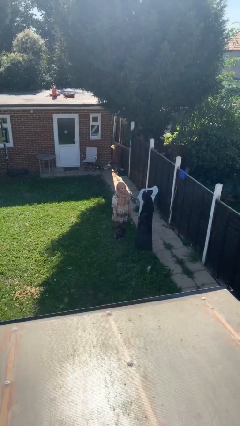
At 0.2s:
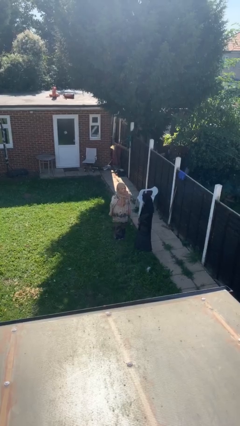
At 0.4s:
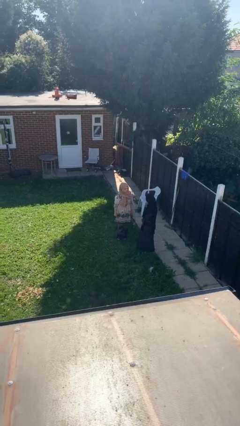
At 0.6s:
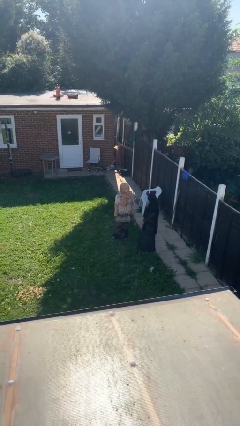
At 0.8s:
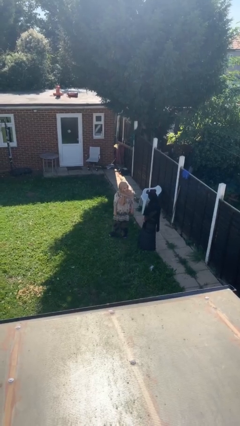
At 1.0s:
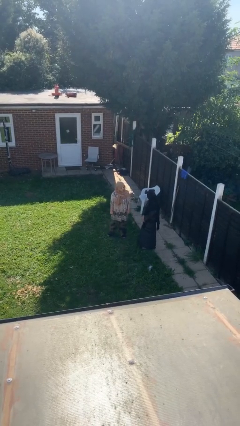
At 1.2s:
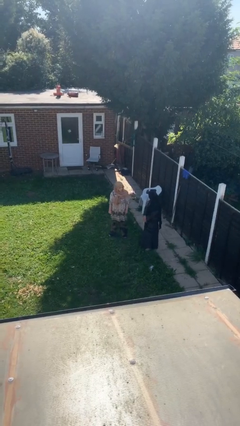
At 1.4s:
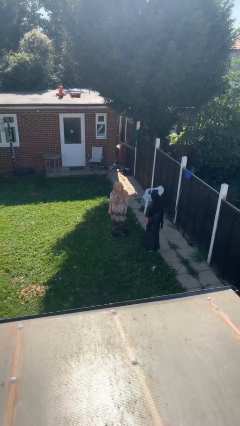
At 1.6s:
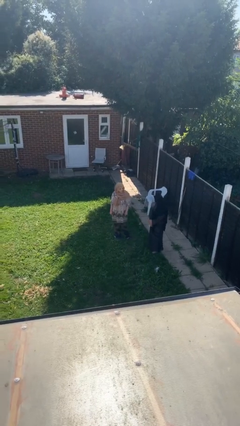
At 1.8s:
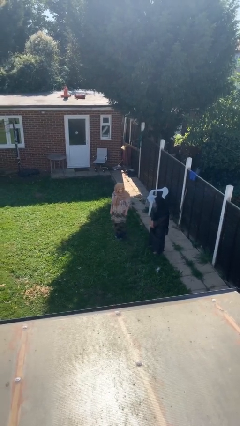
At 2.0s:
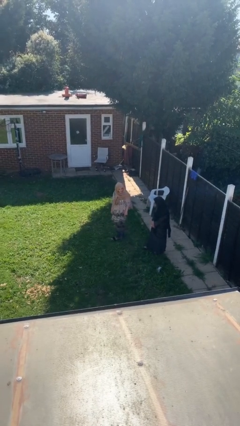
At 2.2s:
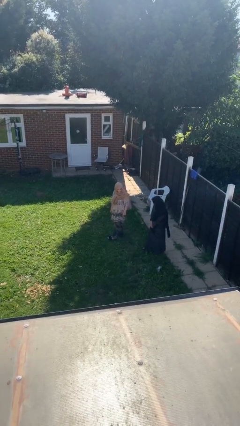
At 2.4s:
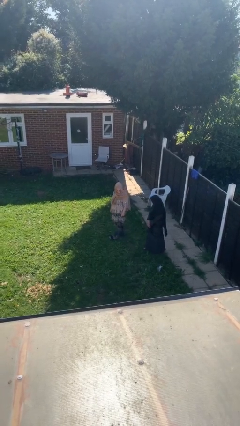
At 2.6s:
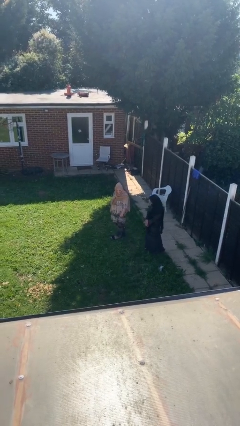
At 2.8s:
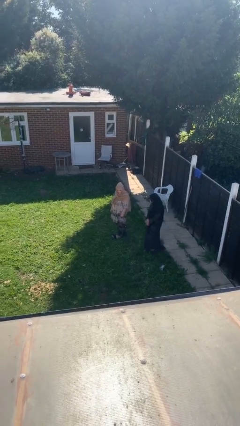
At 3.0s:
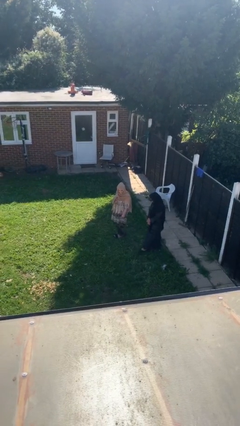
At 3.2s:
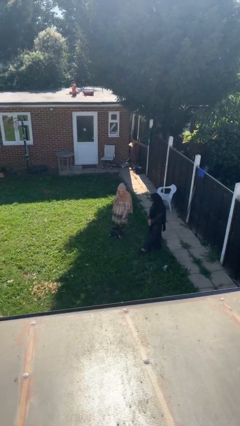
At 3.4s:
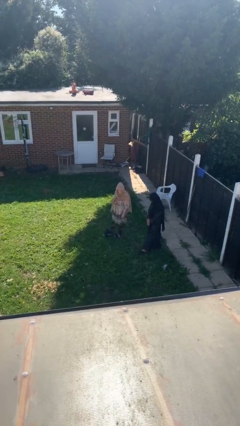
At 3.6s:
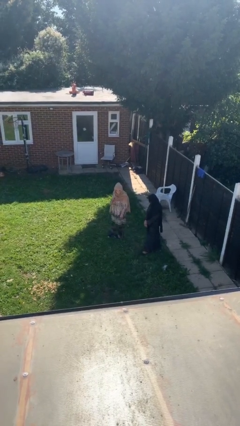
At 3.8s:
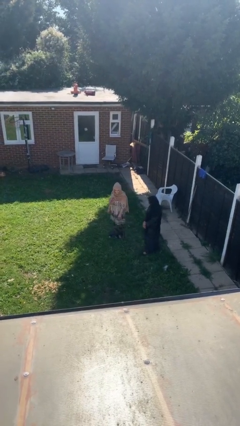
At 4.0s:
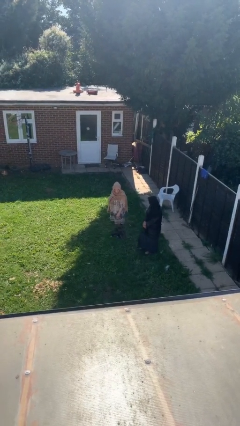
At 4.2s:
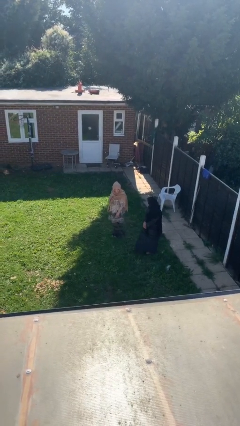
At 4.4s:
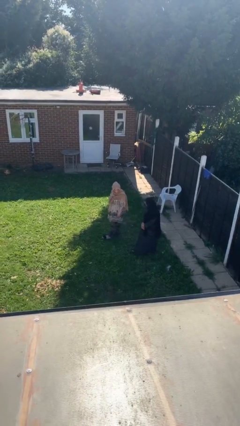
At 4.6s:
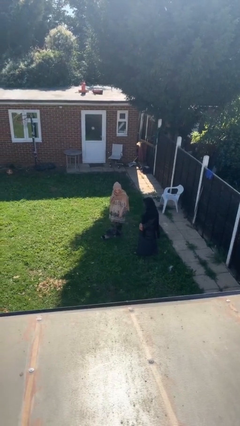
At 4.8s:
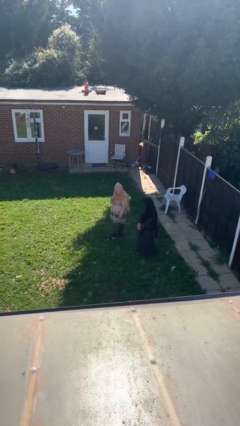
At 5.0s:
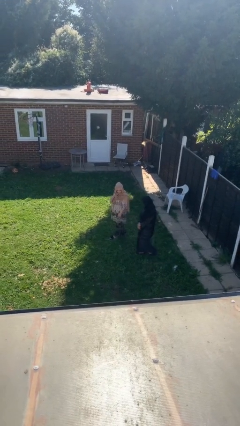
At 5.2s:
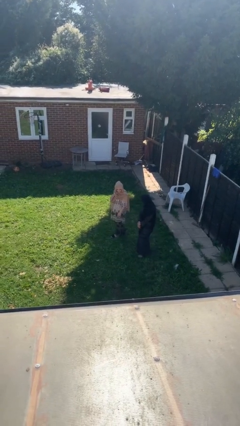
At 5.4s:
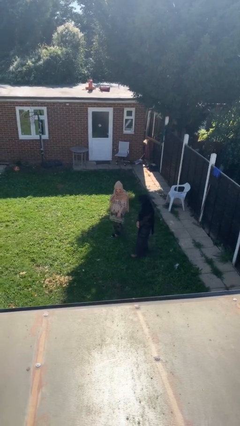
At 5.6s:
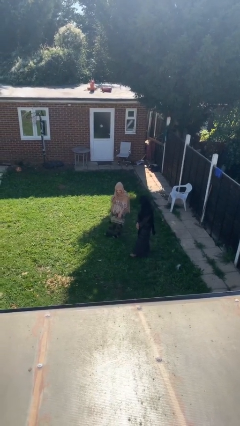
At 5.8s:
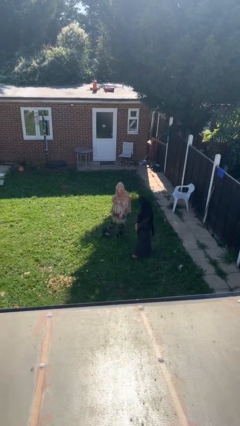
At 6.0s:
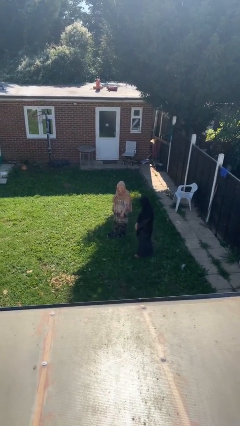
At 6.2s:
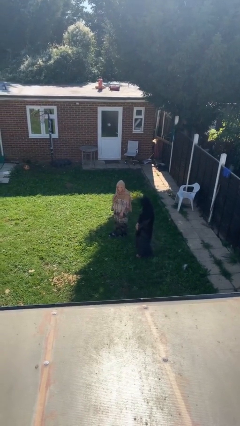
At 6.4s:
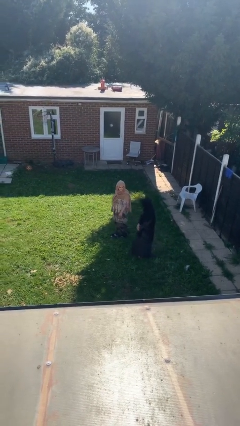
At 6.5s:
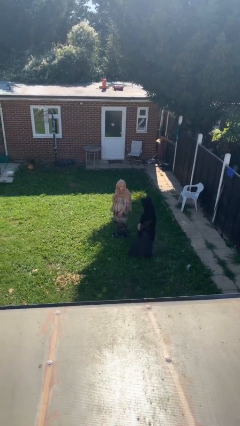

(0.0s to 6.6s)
person talks to person

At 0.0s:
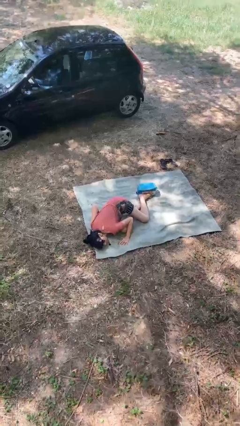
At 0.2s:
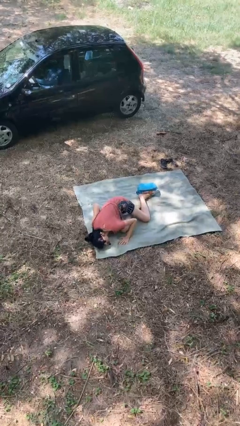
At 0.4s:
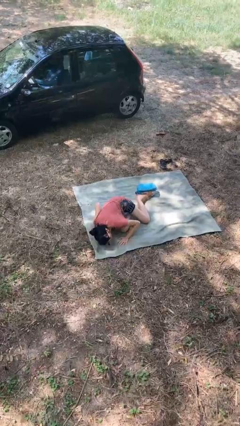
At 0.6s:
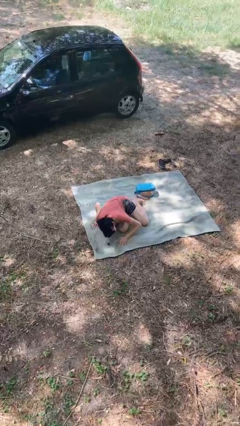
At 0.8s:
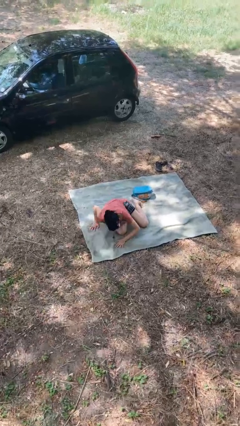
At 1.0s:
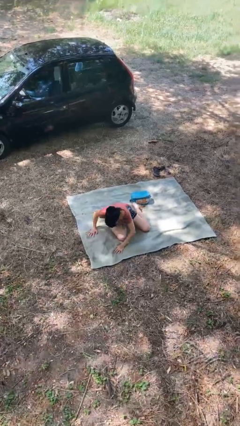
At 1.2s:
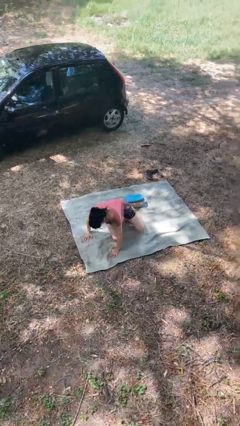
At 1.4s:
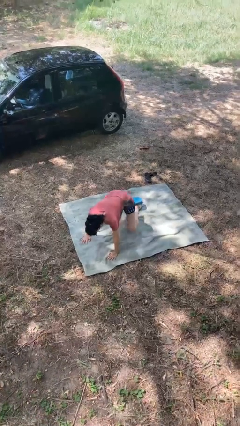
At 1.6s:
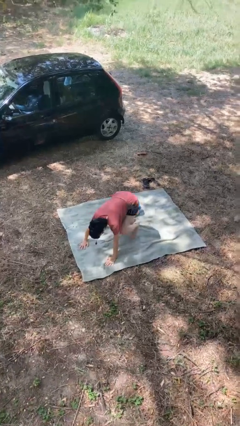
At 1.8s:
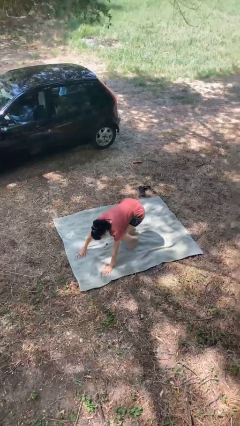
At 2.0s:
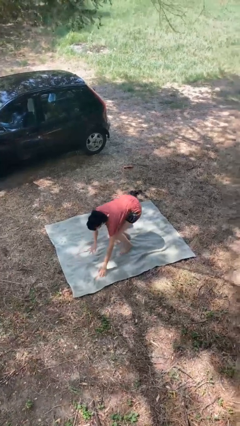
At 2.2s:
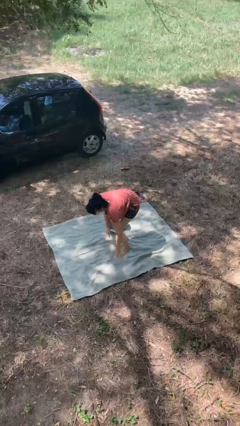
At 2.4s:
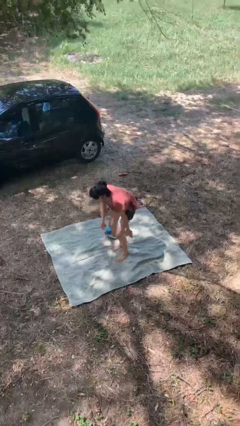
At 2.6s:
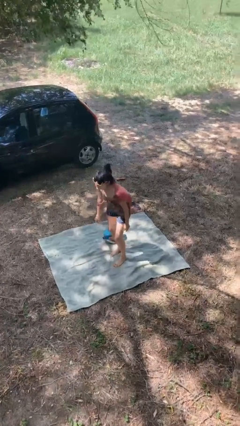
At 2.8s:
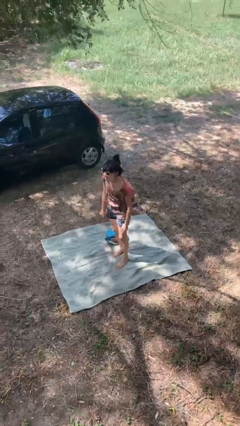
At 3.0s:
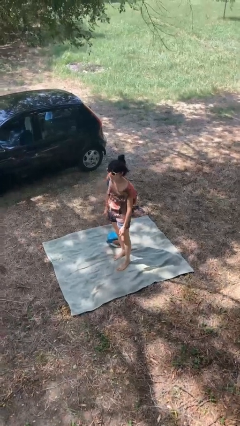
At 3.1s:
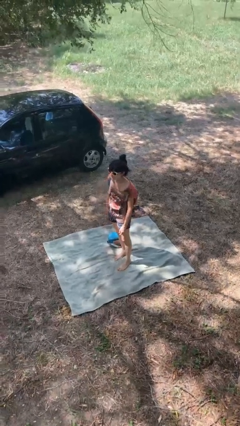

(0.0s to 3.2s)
person stands up from floor

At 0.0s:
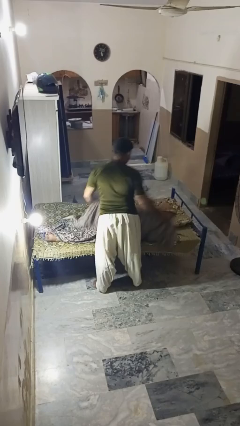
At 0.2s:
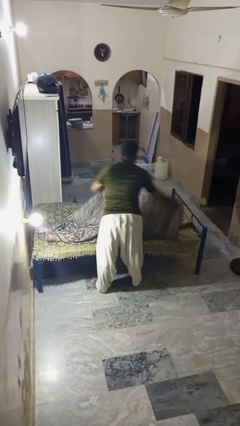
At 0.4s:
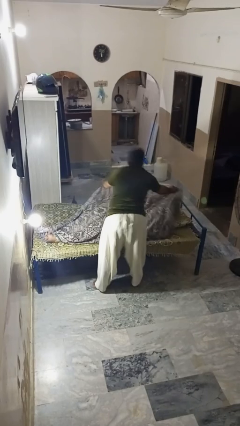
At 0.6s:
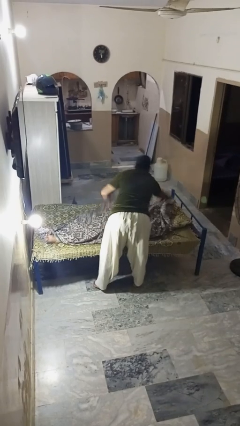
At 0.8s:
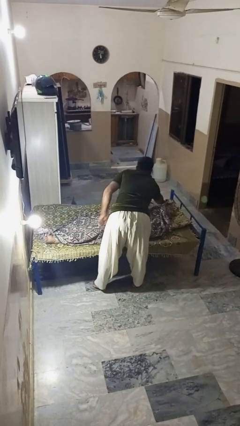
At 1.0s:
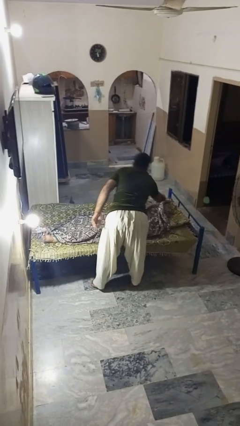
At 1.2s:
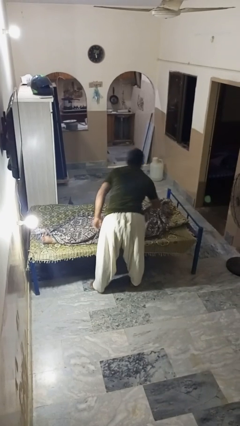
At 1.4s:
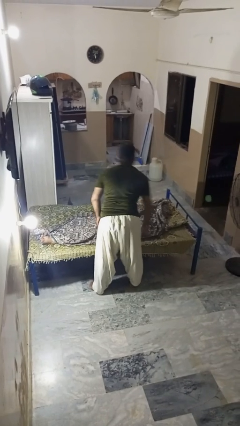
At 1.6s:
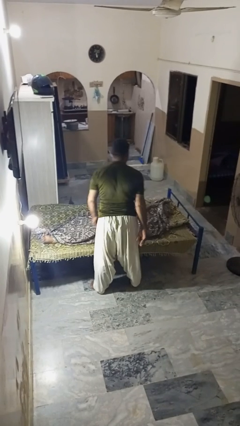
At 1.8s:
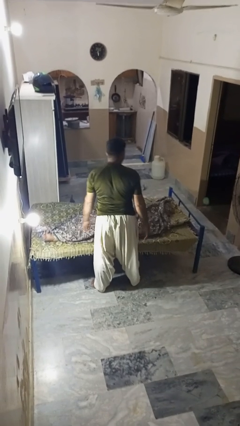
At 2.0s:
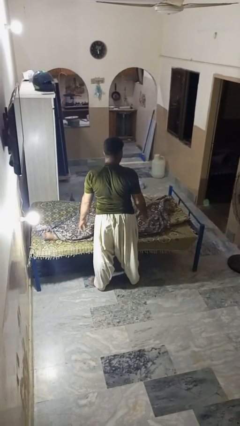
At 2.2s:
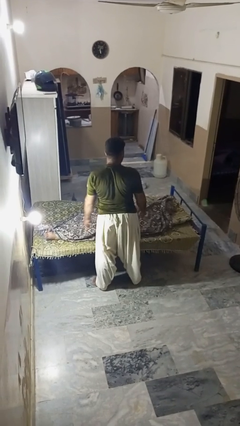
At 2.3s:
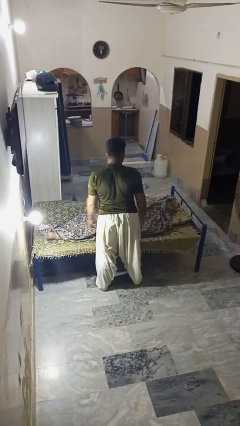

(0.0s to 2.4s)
person covers friend with blanket

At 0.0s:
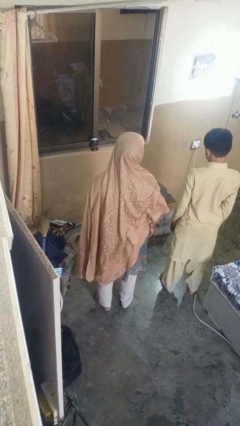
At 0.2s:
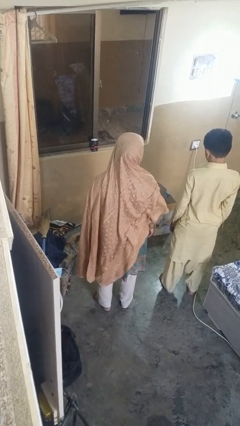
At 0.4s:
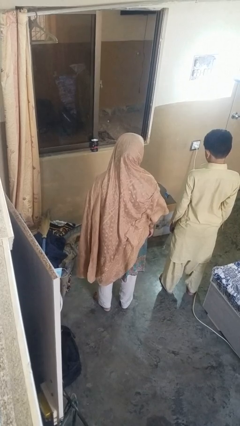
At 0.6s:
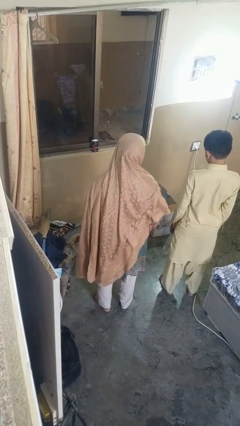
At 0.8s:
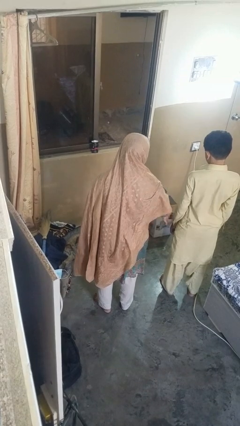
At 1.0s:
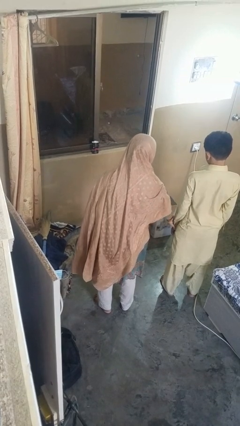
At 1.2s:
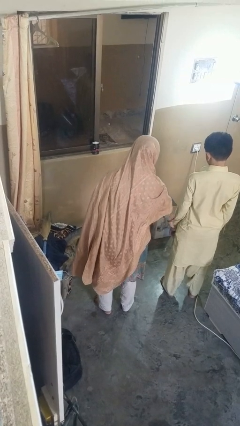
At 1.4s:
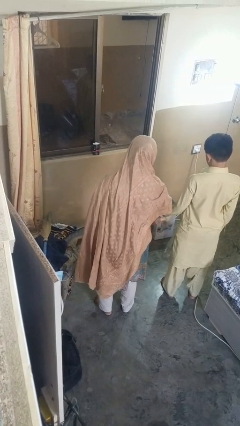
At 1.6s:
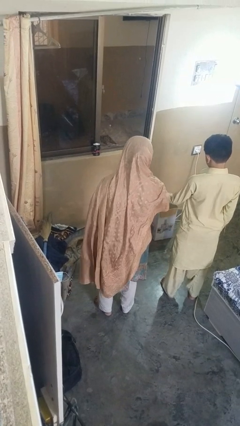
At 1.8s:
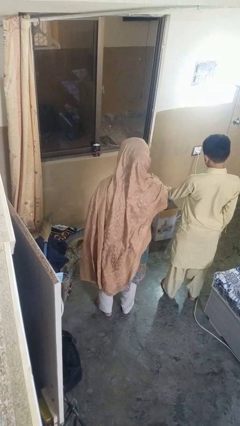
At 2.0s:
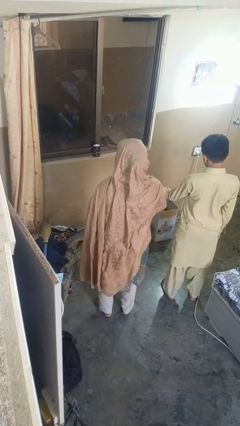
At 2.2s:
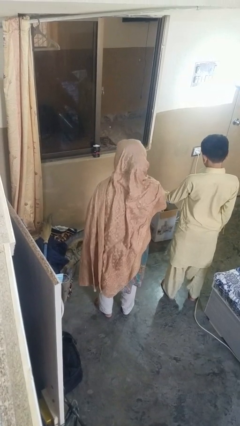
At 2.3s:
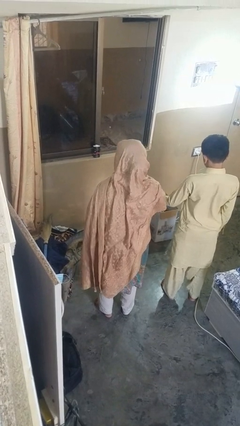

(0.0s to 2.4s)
person grabs person by forearm

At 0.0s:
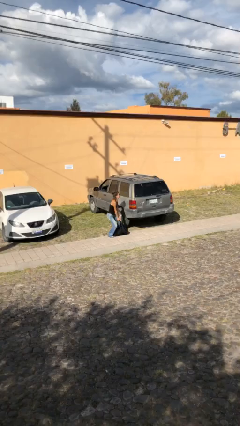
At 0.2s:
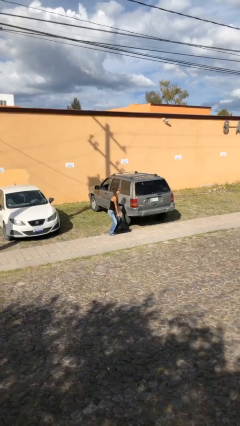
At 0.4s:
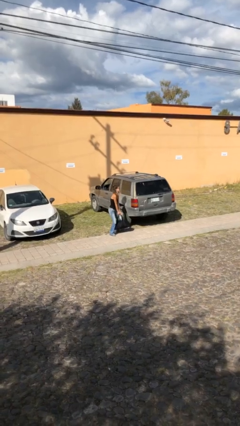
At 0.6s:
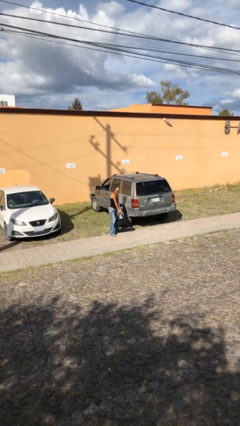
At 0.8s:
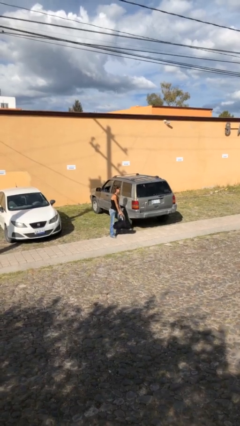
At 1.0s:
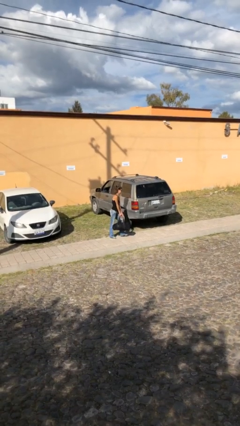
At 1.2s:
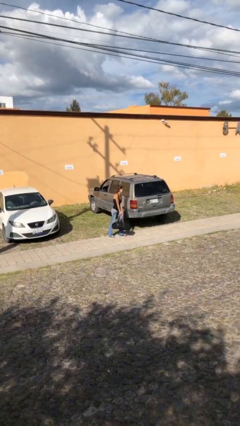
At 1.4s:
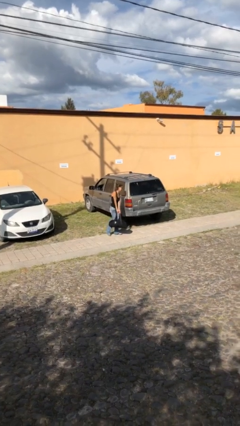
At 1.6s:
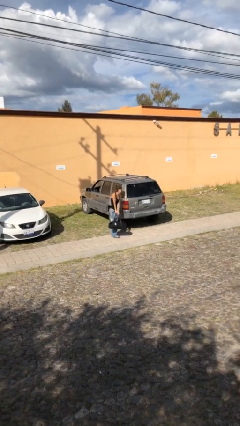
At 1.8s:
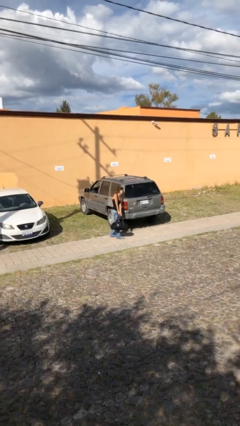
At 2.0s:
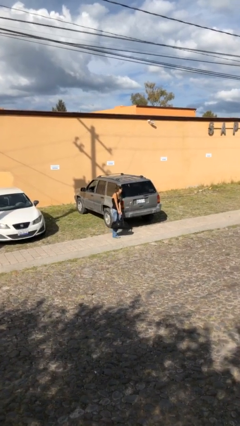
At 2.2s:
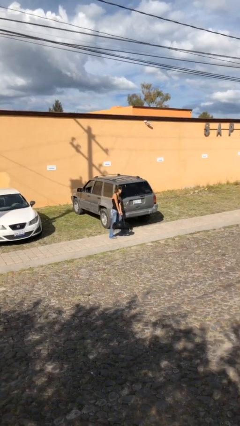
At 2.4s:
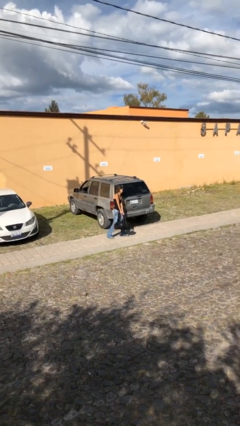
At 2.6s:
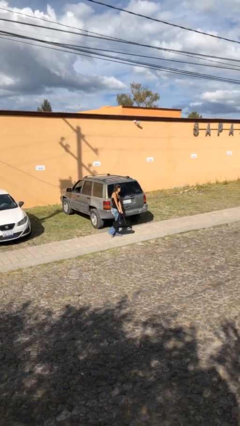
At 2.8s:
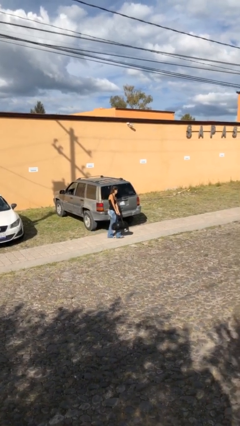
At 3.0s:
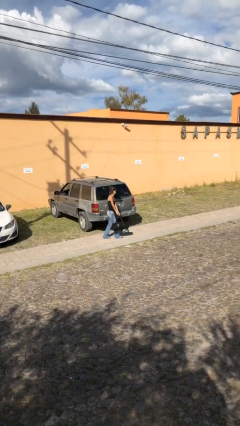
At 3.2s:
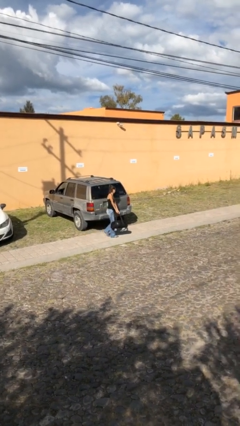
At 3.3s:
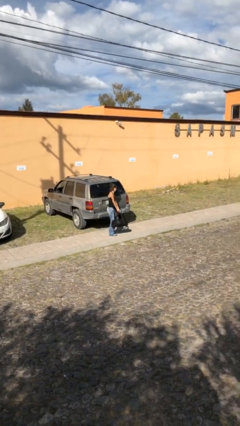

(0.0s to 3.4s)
person carries heavy object
